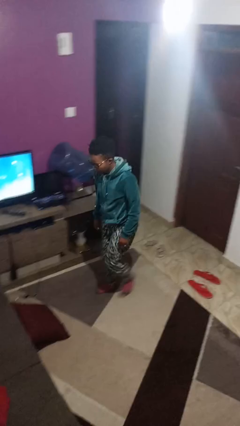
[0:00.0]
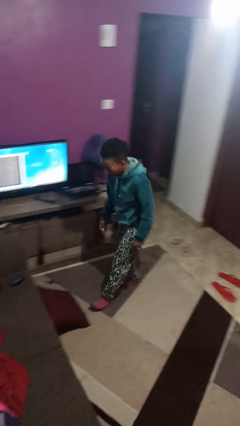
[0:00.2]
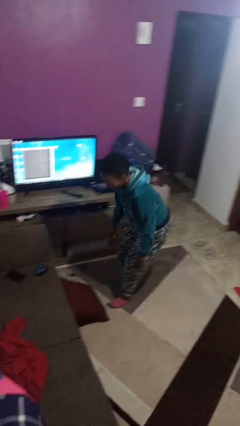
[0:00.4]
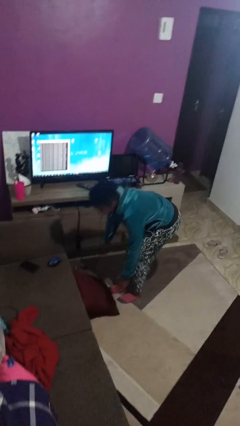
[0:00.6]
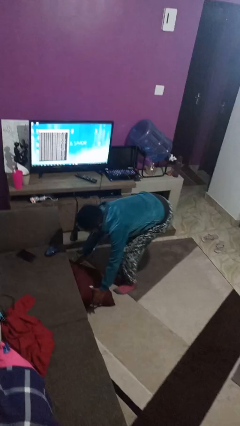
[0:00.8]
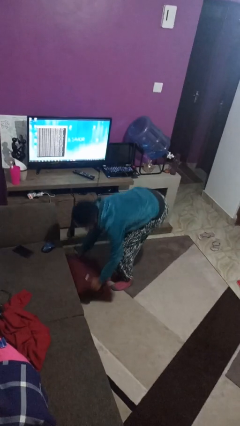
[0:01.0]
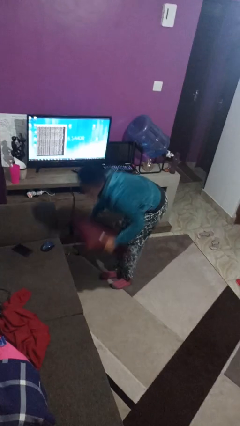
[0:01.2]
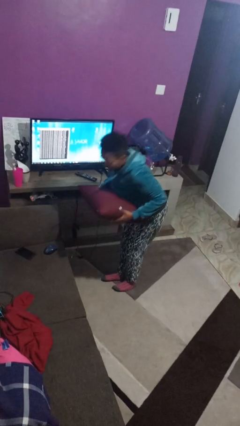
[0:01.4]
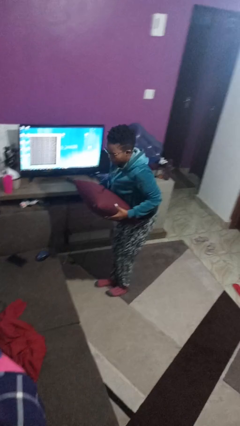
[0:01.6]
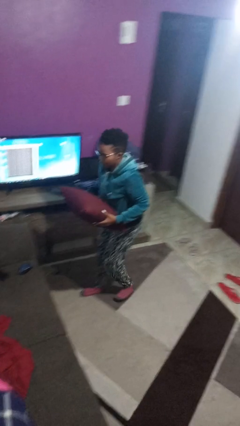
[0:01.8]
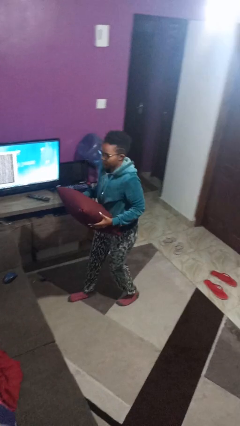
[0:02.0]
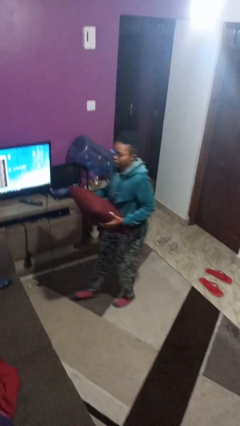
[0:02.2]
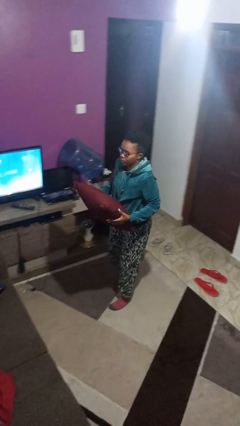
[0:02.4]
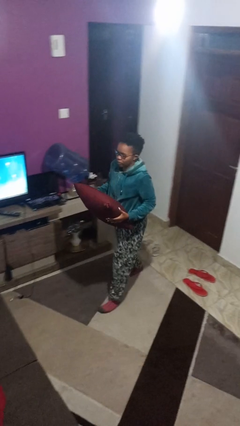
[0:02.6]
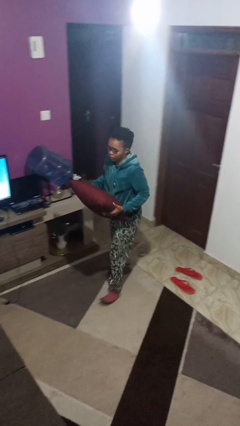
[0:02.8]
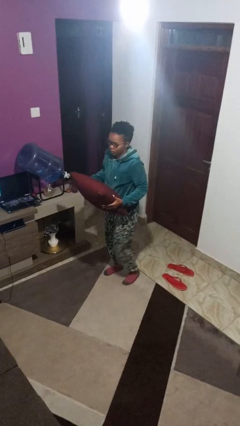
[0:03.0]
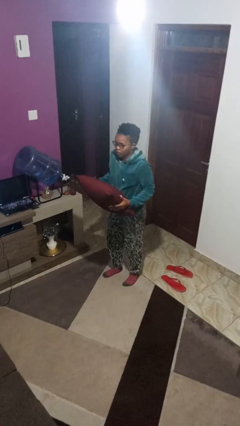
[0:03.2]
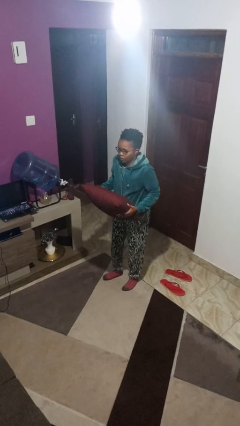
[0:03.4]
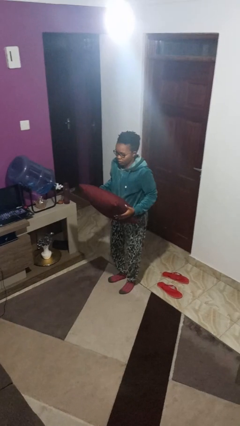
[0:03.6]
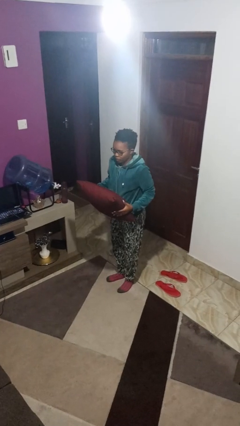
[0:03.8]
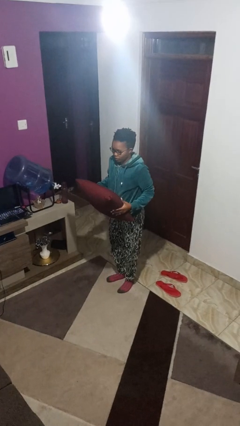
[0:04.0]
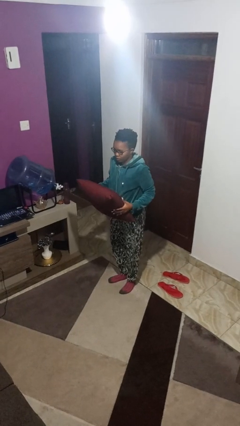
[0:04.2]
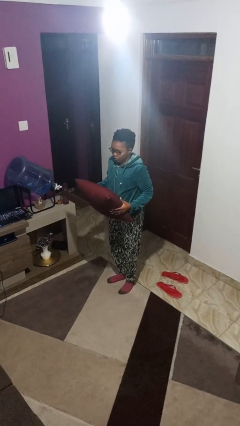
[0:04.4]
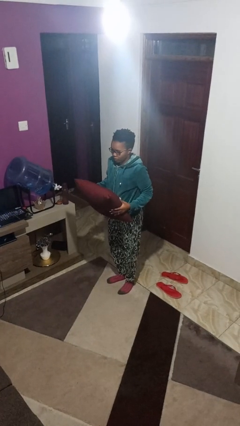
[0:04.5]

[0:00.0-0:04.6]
person picks up object from floor

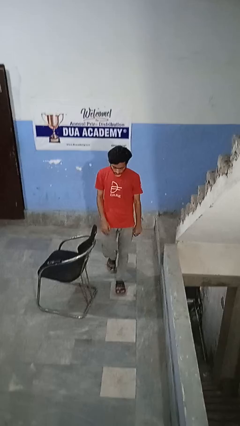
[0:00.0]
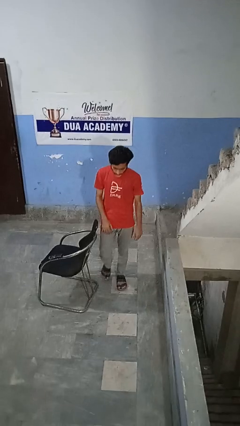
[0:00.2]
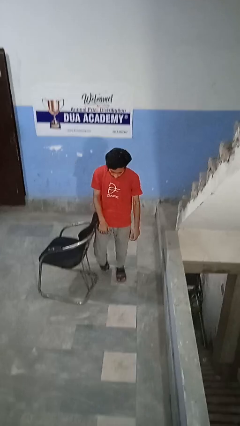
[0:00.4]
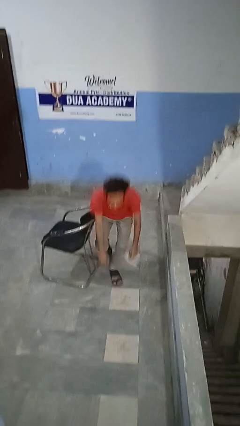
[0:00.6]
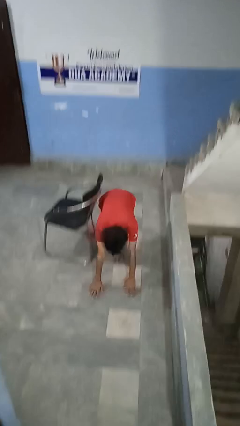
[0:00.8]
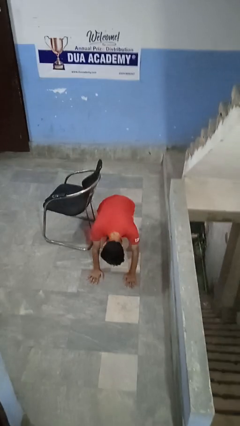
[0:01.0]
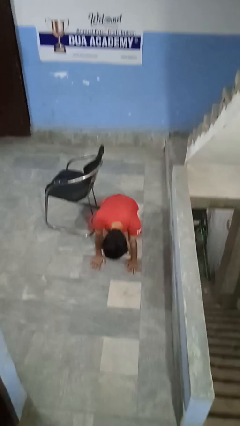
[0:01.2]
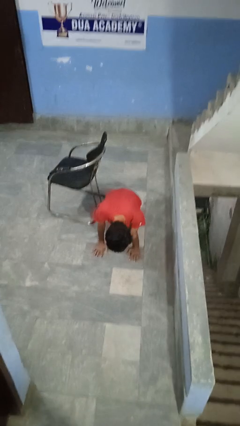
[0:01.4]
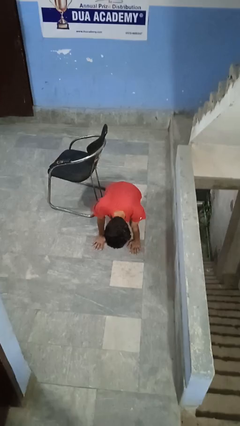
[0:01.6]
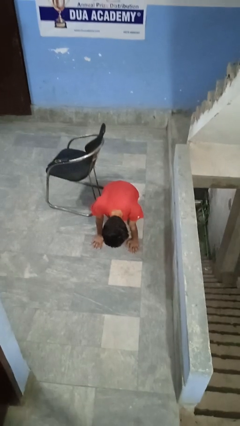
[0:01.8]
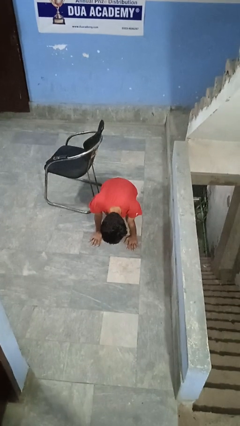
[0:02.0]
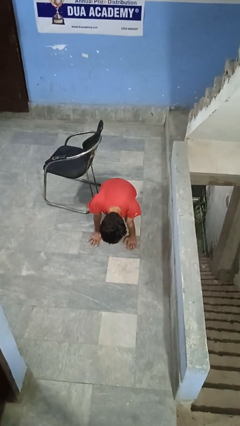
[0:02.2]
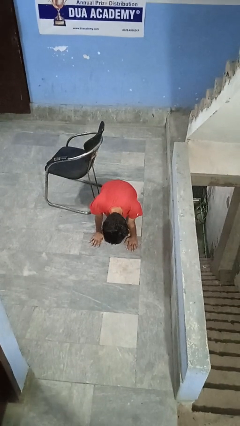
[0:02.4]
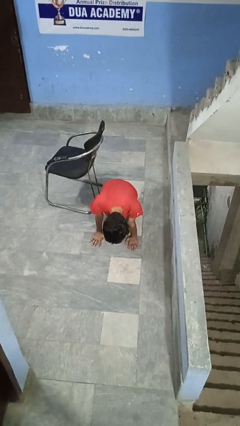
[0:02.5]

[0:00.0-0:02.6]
person trips on object on floor

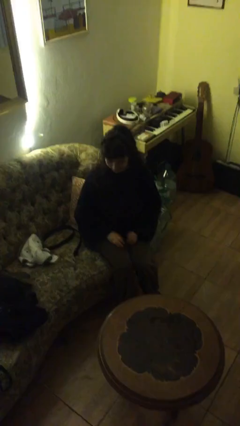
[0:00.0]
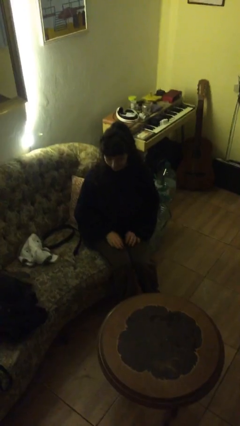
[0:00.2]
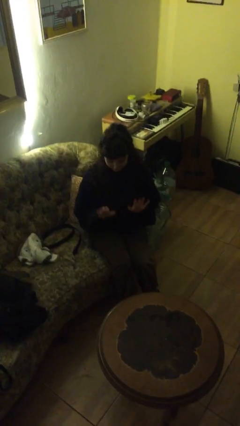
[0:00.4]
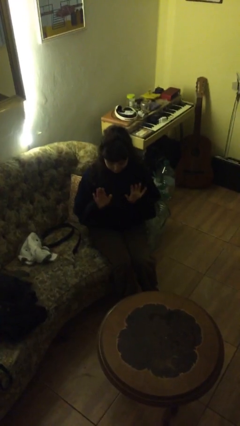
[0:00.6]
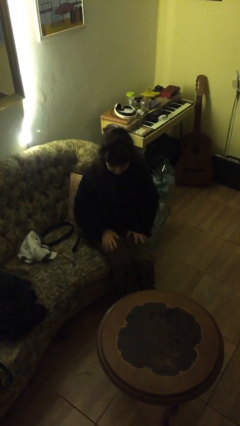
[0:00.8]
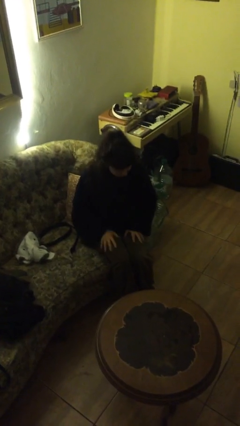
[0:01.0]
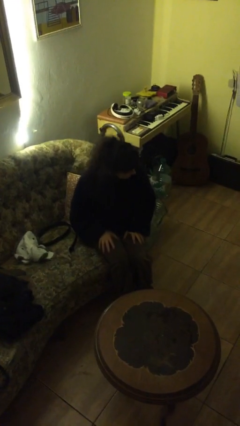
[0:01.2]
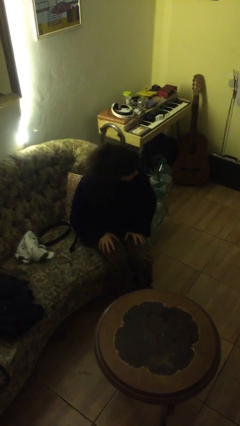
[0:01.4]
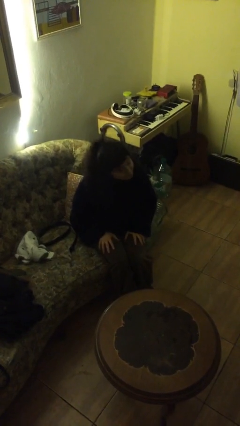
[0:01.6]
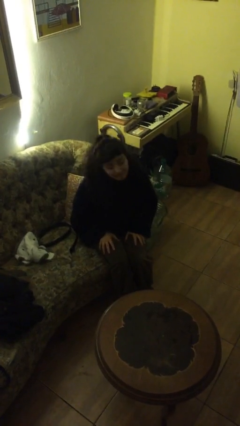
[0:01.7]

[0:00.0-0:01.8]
person slaps hands on thighs

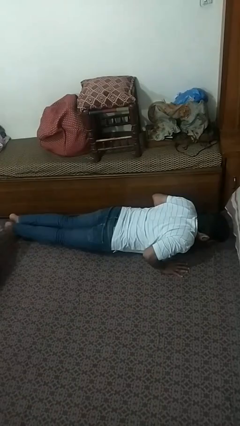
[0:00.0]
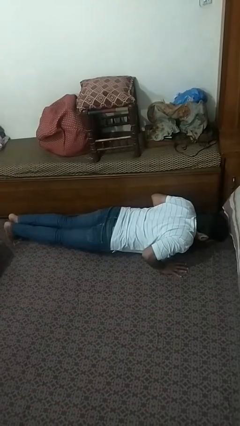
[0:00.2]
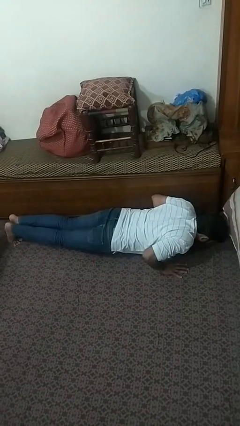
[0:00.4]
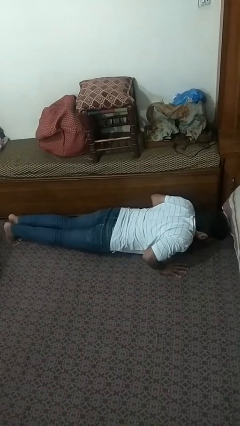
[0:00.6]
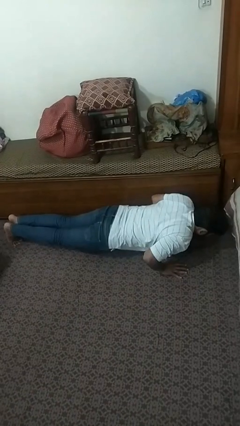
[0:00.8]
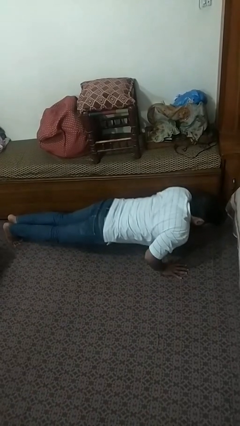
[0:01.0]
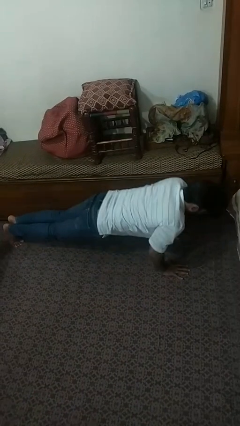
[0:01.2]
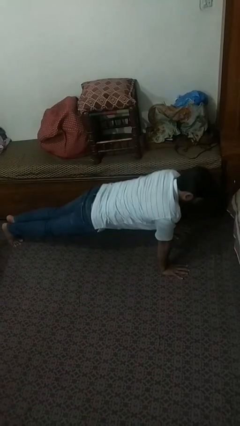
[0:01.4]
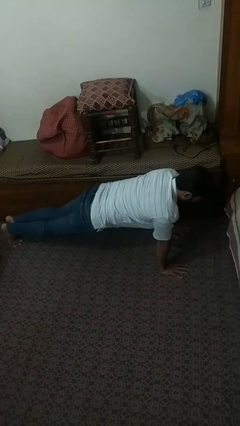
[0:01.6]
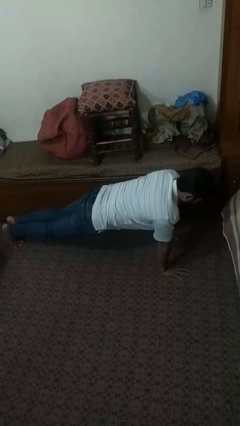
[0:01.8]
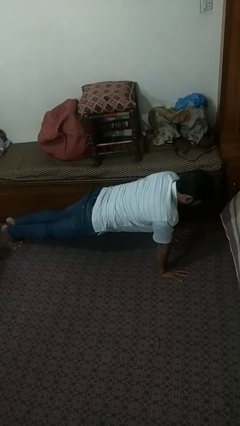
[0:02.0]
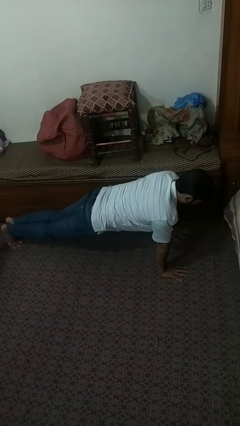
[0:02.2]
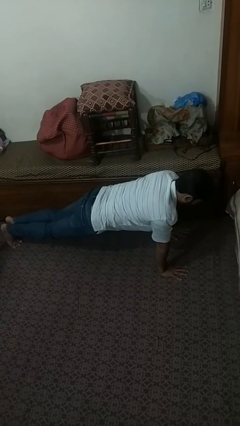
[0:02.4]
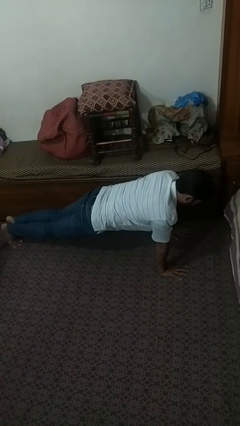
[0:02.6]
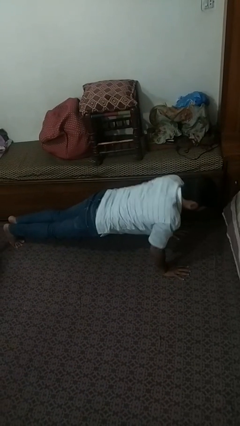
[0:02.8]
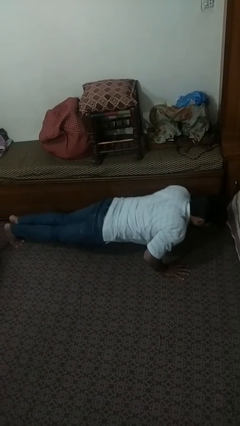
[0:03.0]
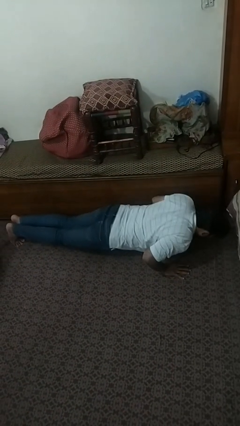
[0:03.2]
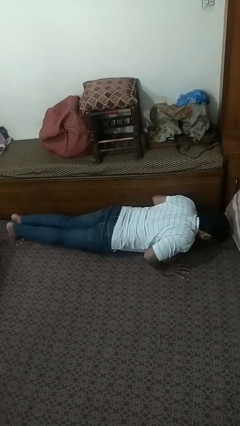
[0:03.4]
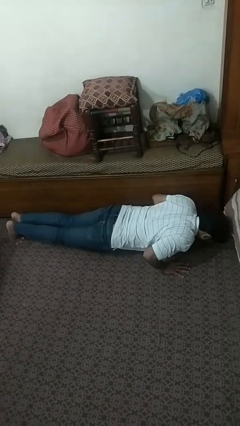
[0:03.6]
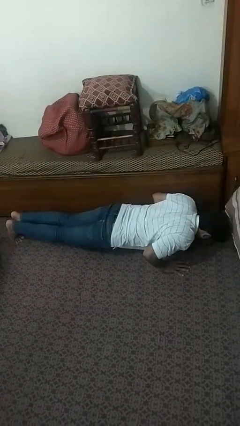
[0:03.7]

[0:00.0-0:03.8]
person exercises with pushup

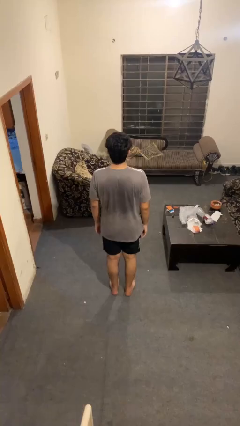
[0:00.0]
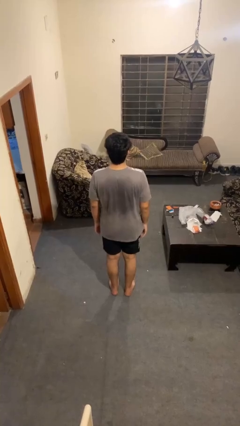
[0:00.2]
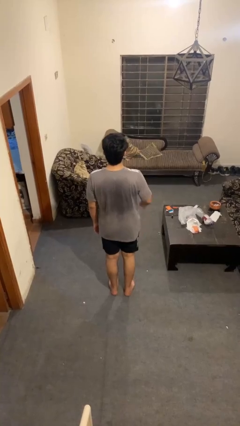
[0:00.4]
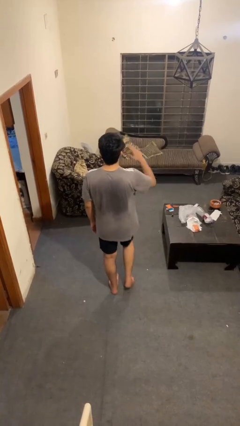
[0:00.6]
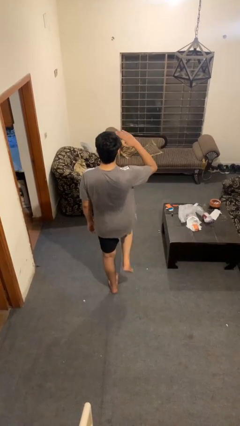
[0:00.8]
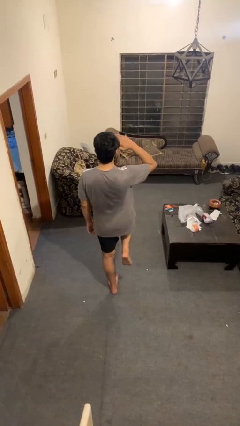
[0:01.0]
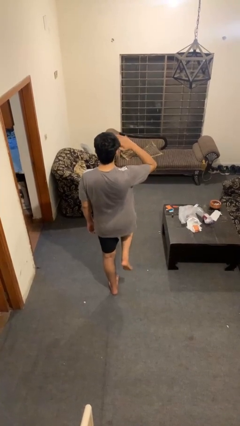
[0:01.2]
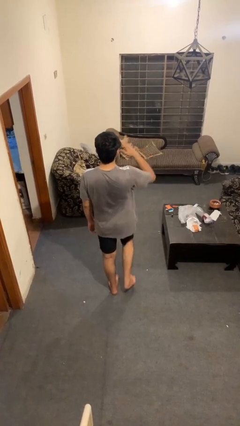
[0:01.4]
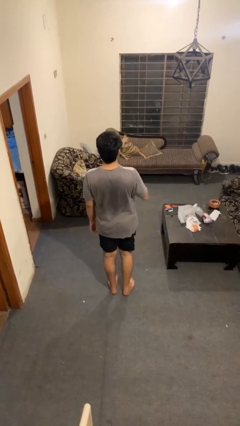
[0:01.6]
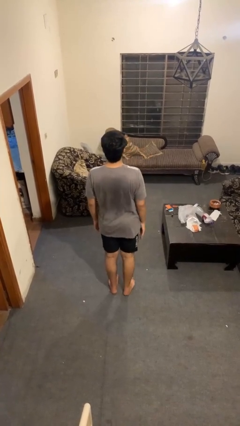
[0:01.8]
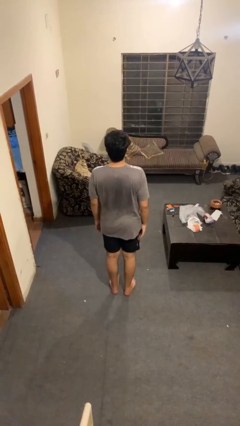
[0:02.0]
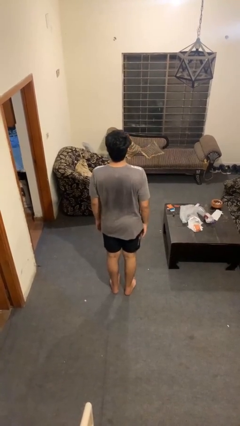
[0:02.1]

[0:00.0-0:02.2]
person salutes

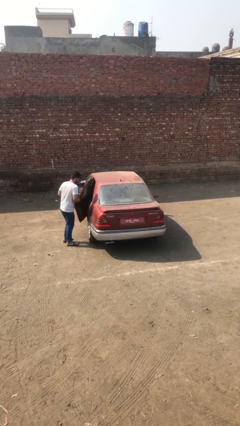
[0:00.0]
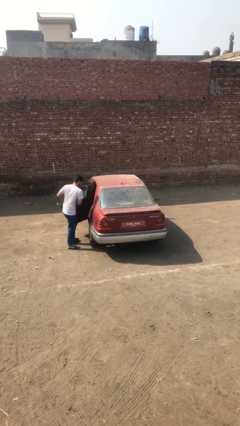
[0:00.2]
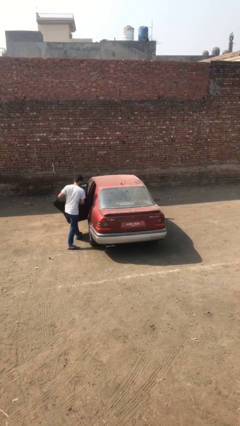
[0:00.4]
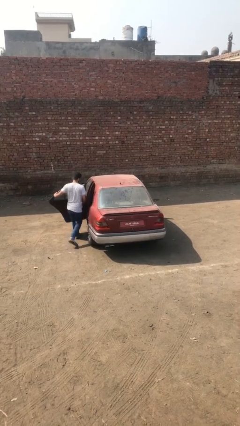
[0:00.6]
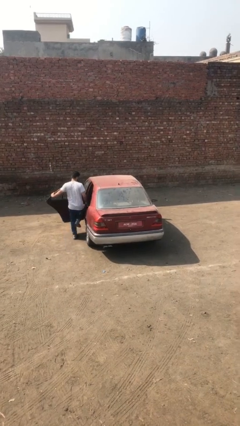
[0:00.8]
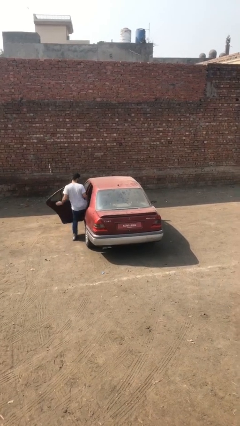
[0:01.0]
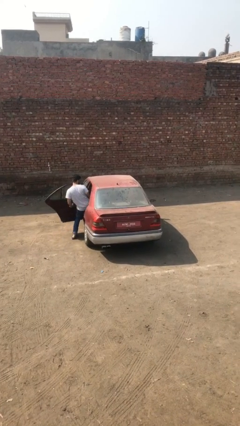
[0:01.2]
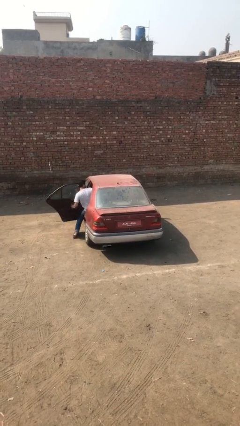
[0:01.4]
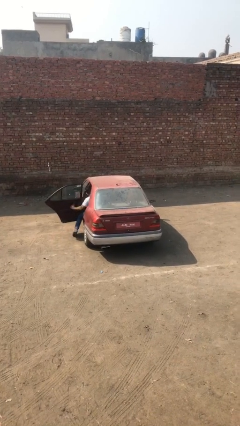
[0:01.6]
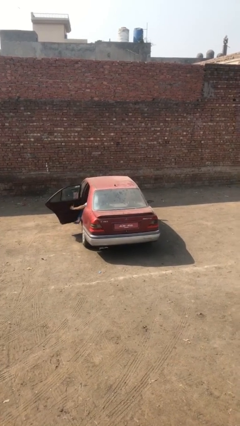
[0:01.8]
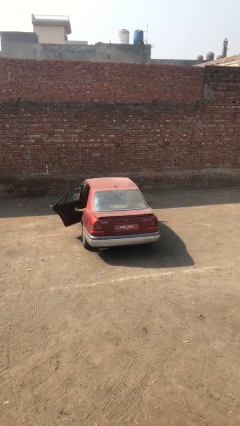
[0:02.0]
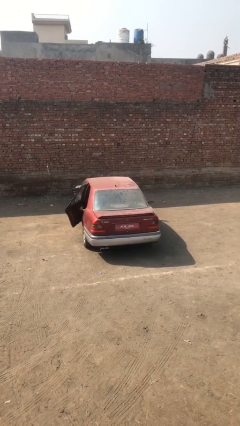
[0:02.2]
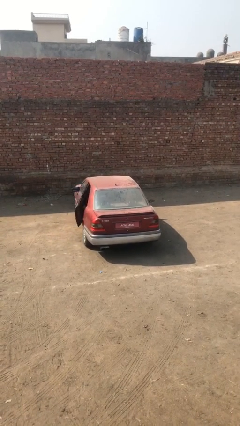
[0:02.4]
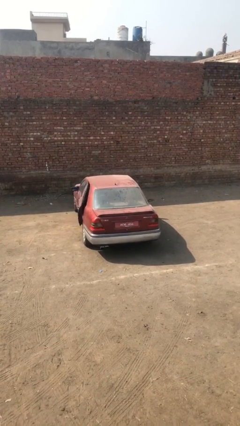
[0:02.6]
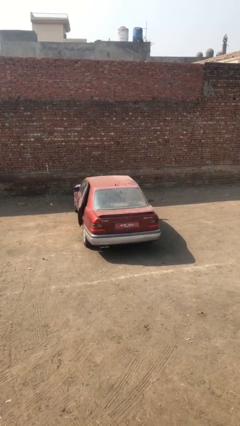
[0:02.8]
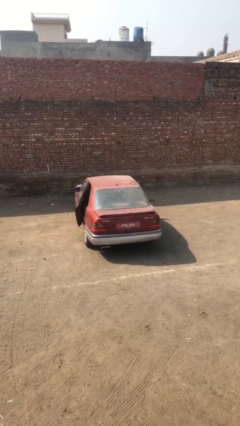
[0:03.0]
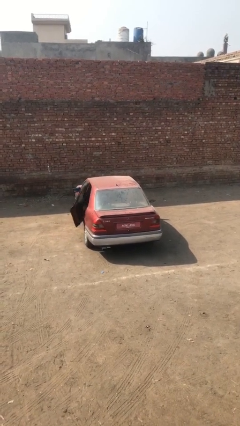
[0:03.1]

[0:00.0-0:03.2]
car picks up person
